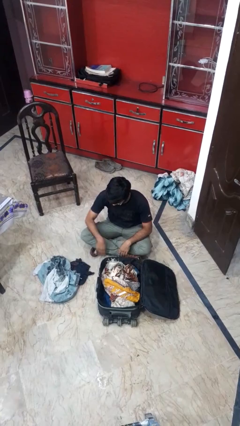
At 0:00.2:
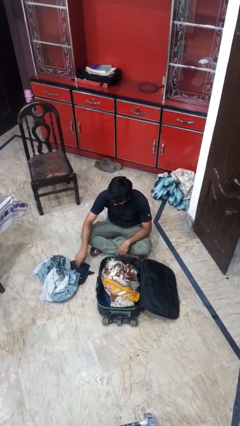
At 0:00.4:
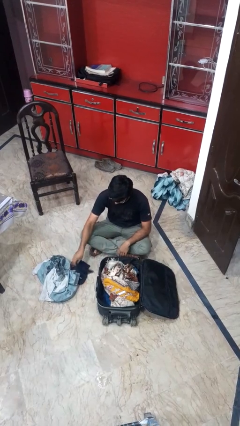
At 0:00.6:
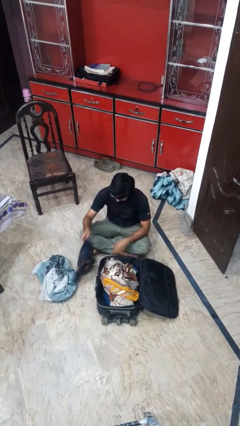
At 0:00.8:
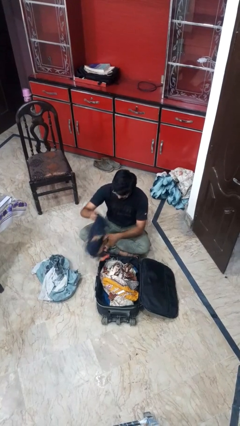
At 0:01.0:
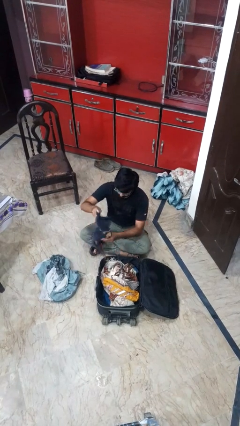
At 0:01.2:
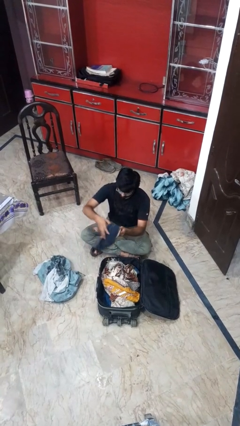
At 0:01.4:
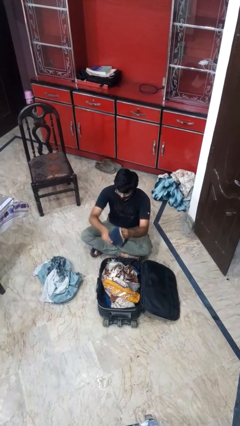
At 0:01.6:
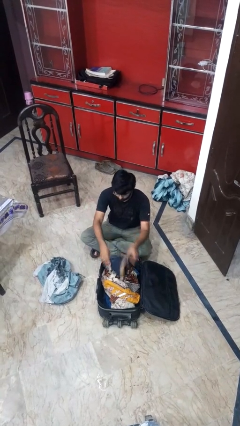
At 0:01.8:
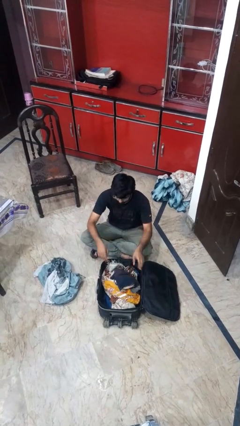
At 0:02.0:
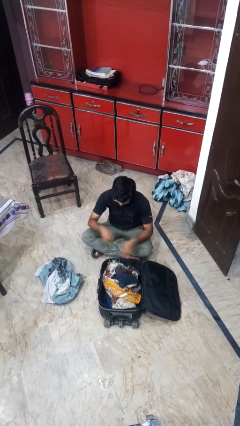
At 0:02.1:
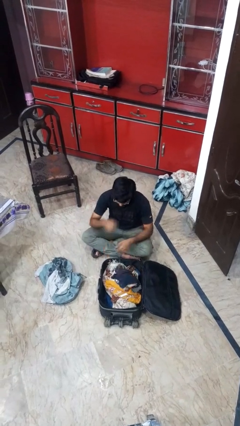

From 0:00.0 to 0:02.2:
person loads clothes into suitcase

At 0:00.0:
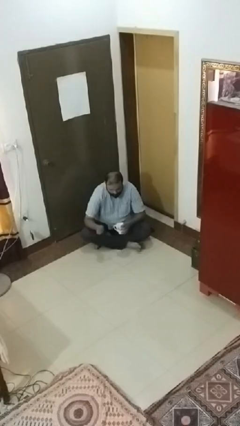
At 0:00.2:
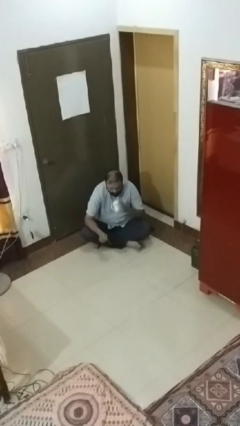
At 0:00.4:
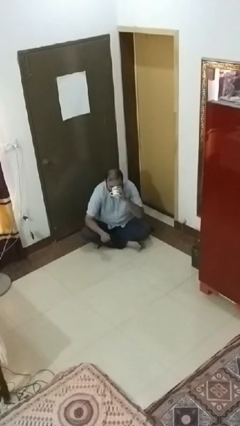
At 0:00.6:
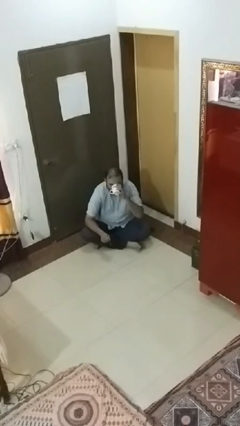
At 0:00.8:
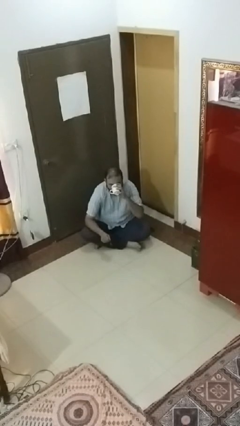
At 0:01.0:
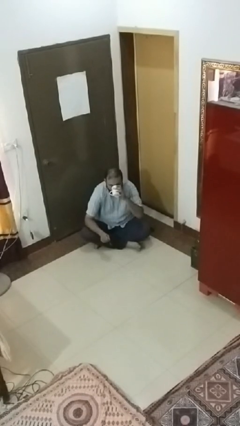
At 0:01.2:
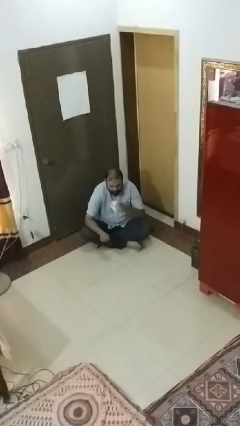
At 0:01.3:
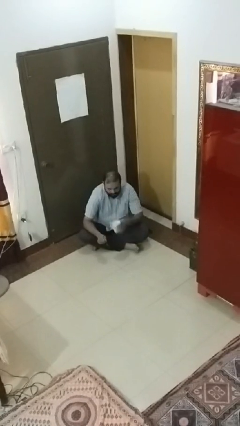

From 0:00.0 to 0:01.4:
person drinks from mug

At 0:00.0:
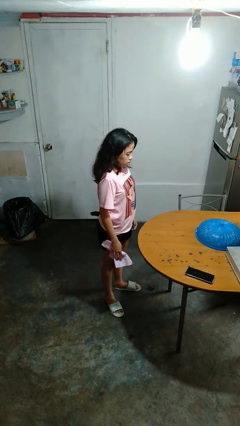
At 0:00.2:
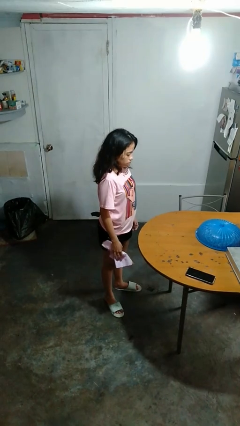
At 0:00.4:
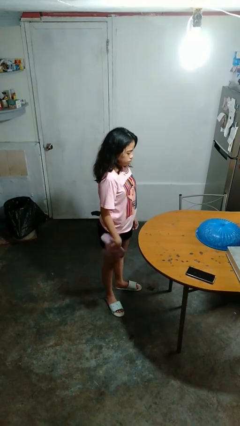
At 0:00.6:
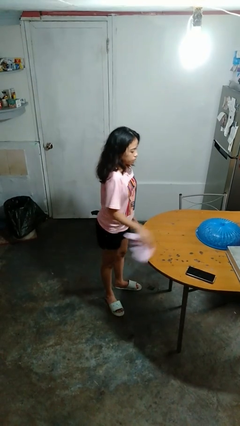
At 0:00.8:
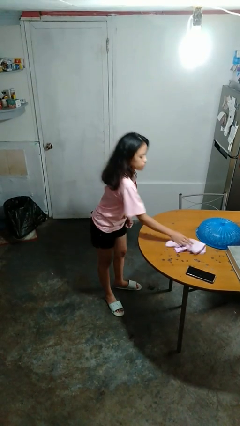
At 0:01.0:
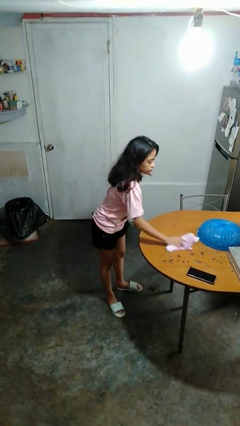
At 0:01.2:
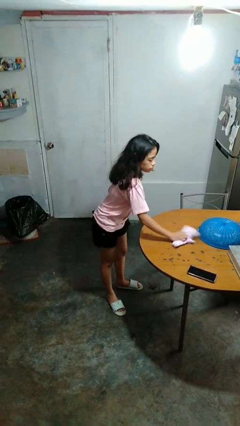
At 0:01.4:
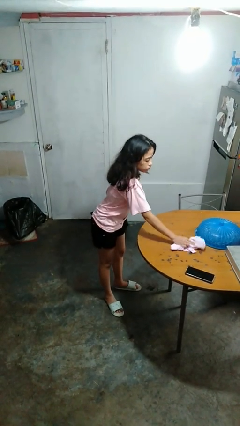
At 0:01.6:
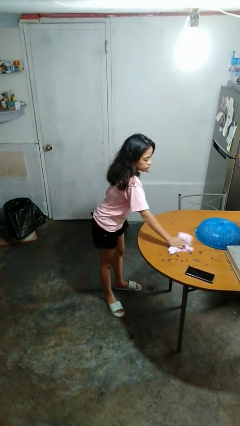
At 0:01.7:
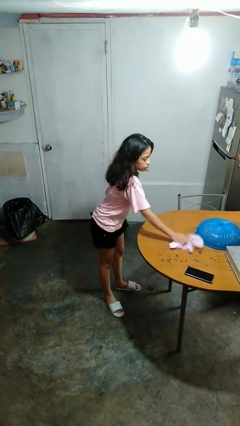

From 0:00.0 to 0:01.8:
person cleans table with rag

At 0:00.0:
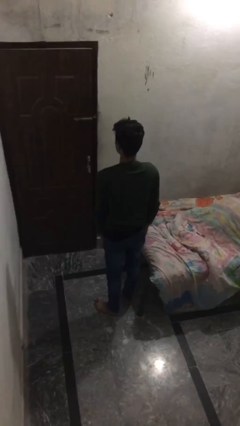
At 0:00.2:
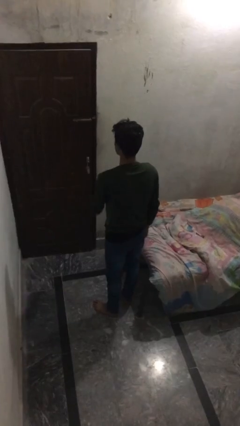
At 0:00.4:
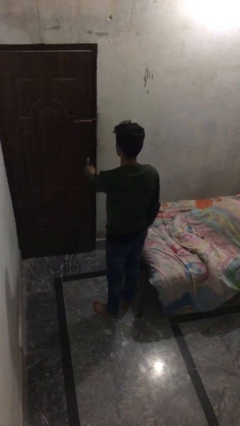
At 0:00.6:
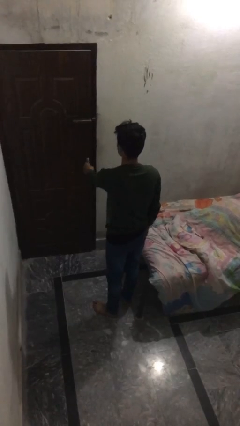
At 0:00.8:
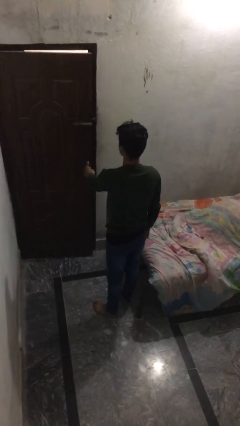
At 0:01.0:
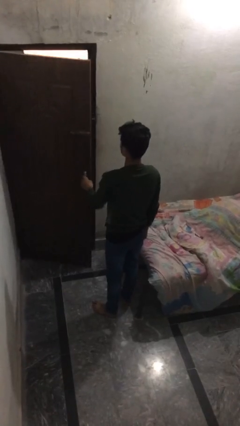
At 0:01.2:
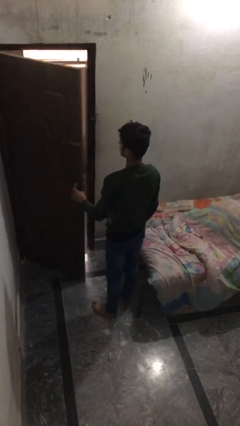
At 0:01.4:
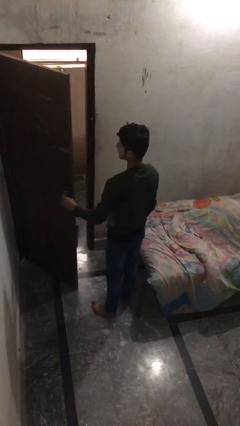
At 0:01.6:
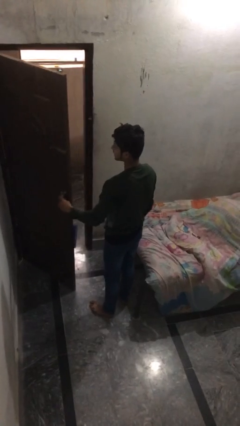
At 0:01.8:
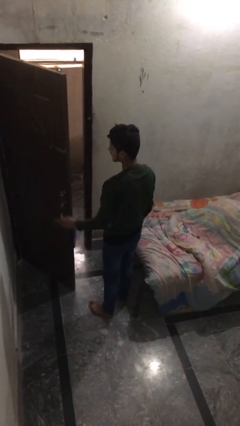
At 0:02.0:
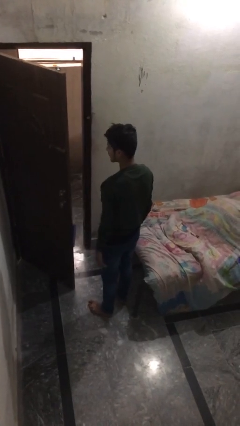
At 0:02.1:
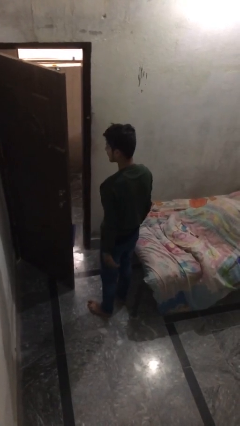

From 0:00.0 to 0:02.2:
person opens facility door

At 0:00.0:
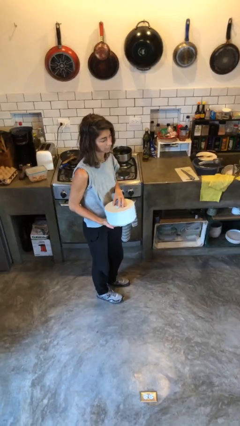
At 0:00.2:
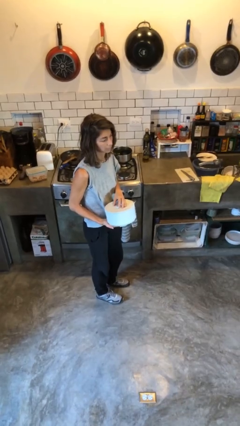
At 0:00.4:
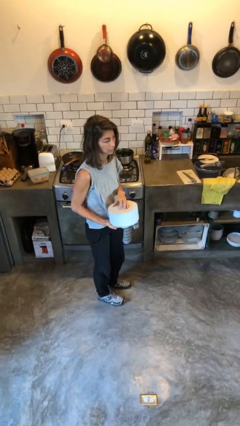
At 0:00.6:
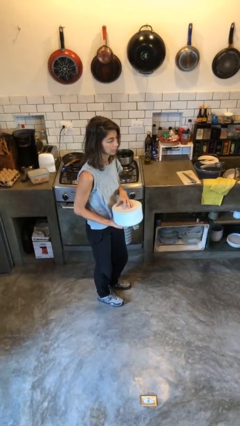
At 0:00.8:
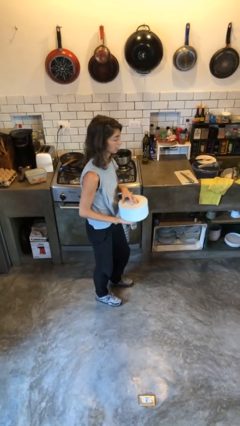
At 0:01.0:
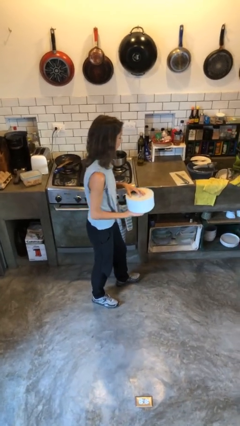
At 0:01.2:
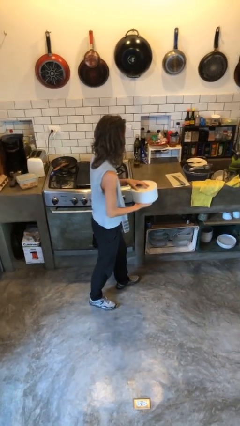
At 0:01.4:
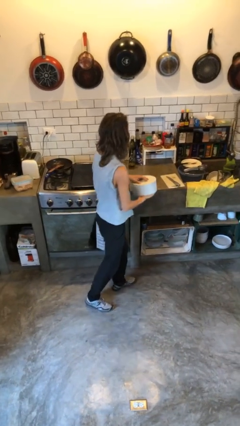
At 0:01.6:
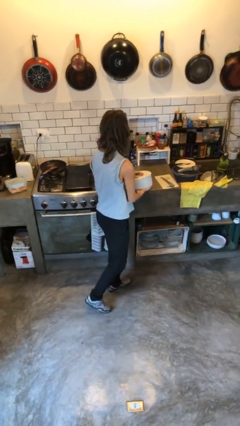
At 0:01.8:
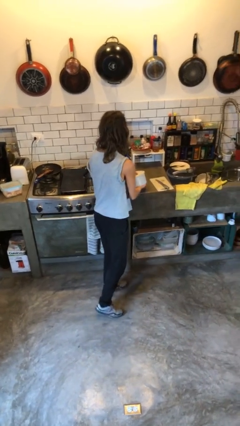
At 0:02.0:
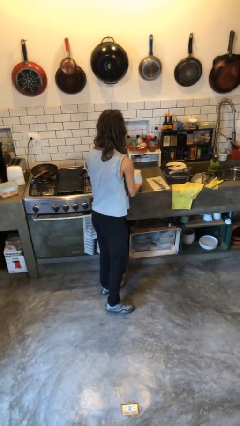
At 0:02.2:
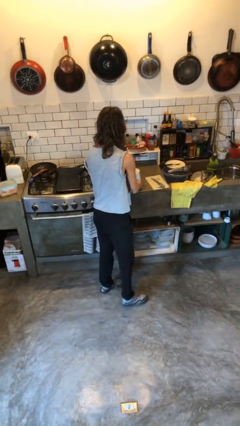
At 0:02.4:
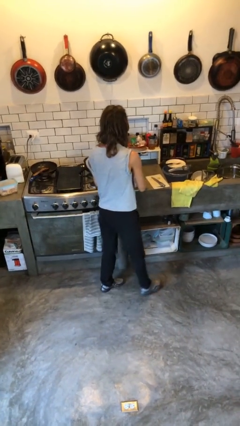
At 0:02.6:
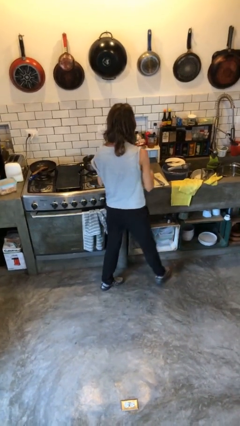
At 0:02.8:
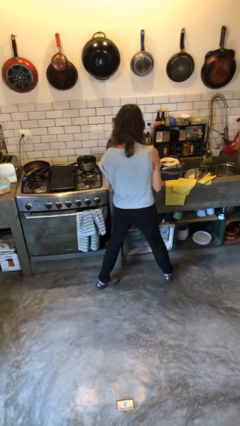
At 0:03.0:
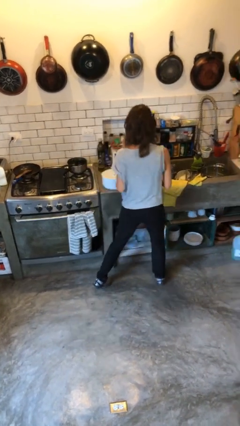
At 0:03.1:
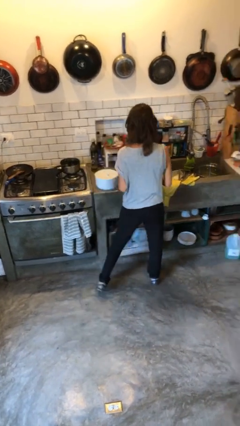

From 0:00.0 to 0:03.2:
person puts down object on countertop

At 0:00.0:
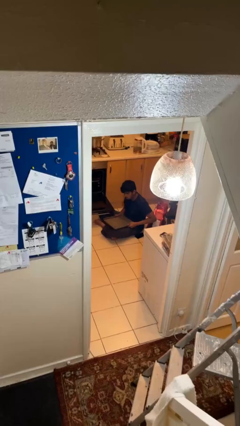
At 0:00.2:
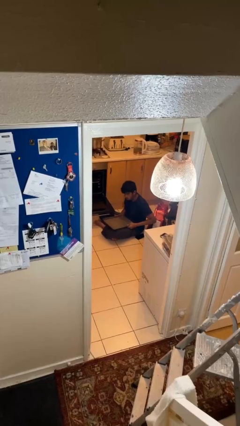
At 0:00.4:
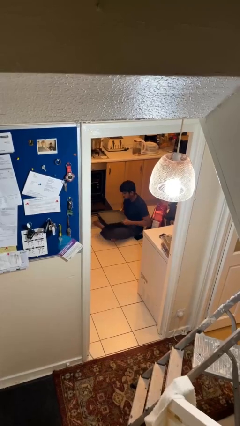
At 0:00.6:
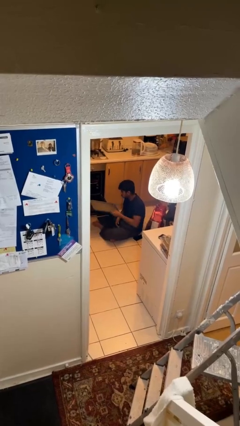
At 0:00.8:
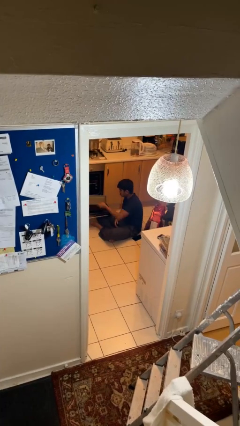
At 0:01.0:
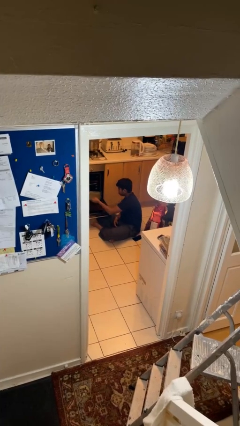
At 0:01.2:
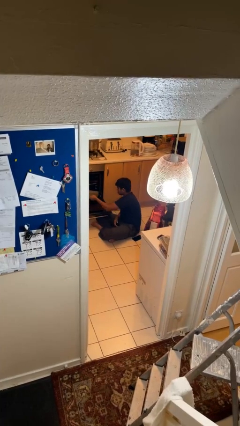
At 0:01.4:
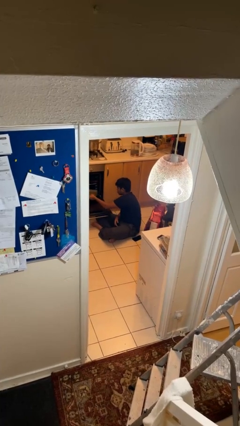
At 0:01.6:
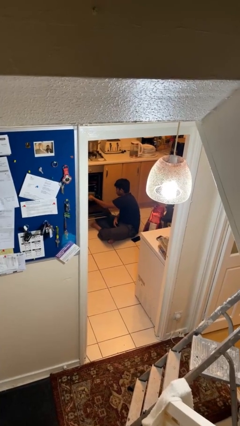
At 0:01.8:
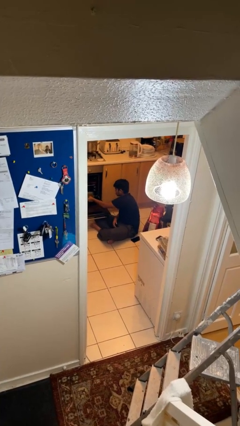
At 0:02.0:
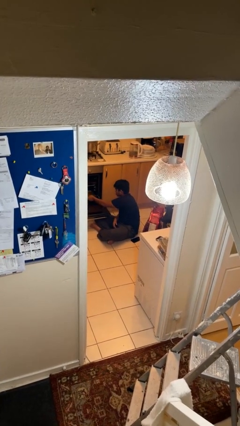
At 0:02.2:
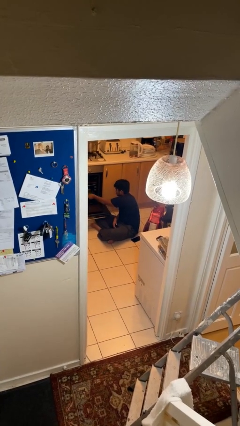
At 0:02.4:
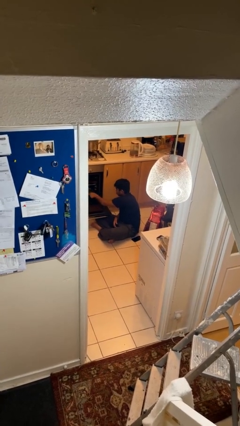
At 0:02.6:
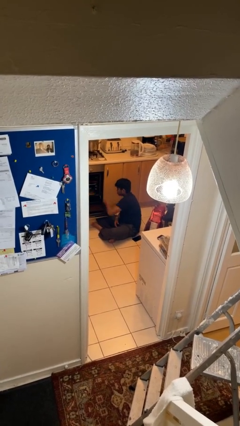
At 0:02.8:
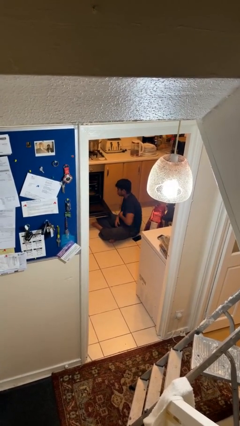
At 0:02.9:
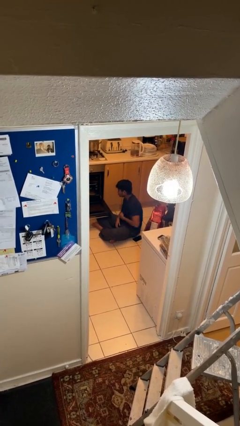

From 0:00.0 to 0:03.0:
person puts object into oven

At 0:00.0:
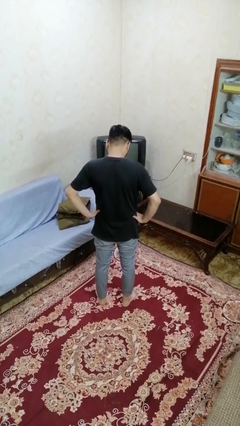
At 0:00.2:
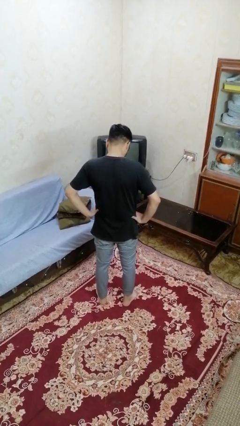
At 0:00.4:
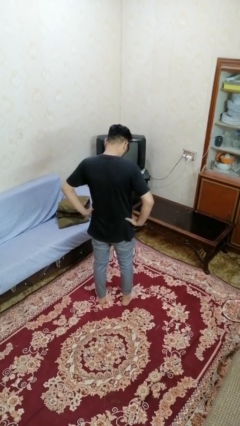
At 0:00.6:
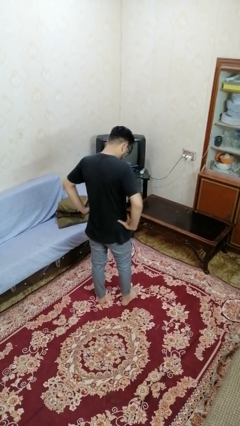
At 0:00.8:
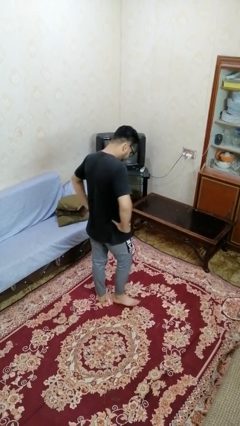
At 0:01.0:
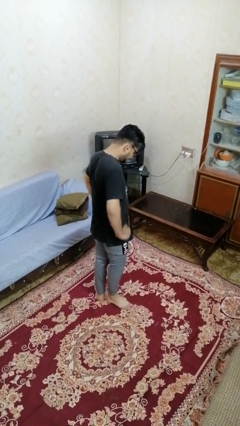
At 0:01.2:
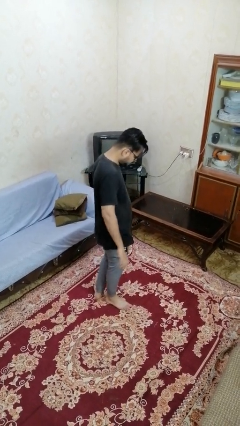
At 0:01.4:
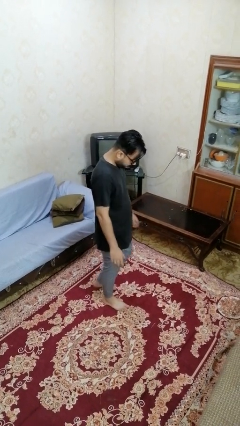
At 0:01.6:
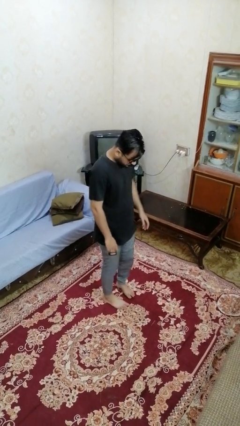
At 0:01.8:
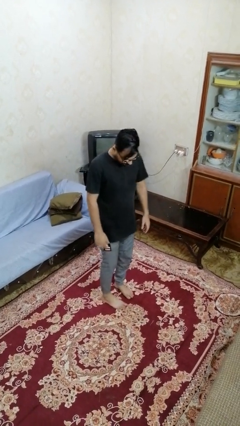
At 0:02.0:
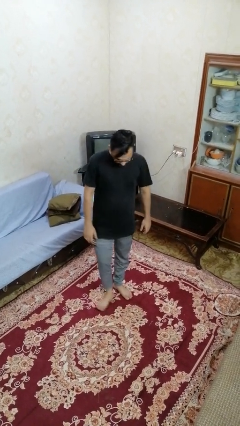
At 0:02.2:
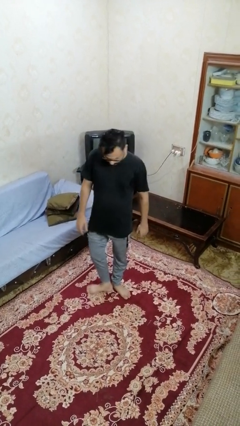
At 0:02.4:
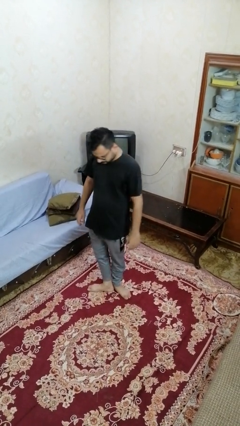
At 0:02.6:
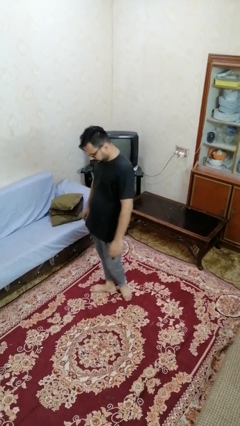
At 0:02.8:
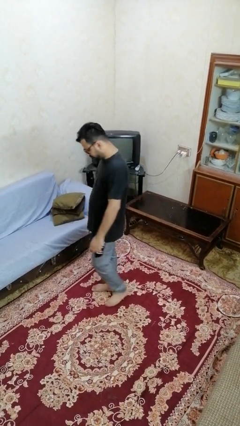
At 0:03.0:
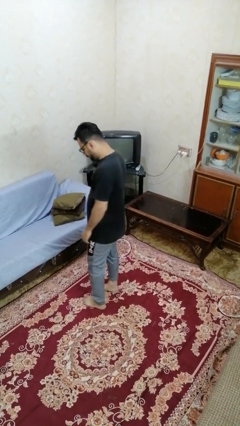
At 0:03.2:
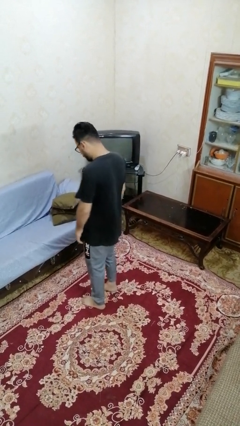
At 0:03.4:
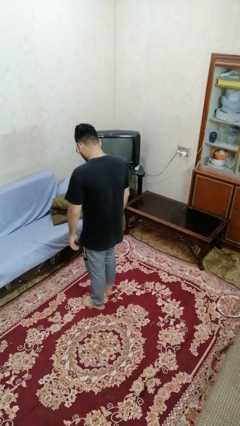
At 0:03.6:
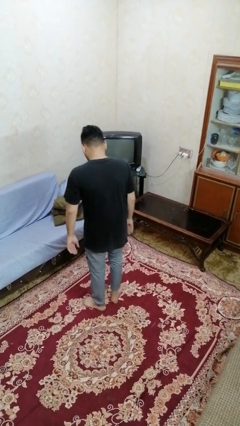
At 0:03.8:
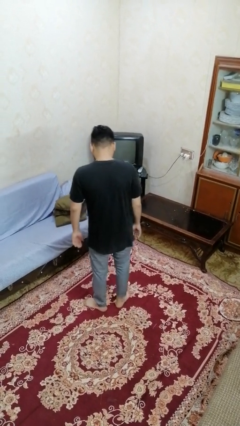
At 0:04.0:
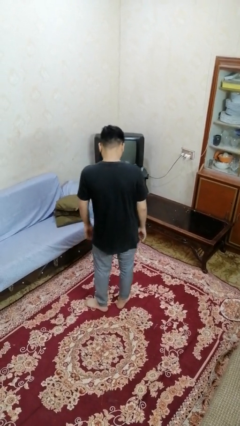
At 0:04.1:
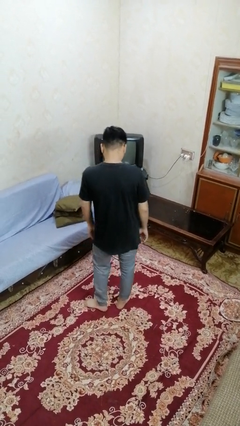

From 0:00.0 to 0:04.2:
person twirls
